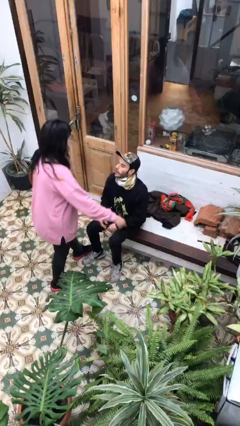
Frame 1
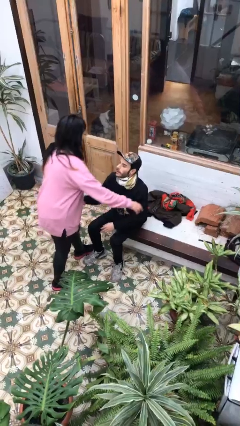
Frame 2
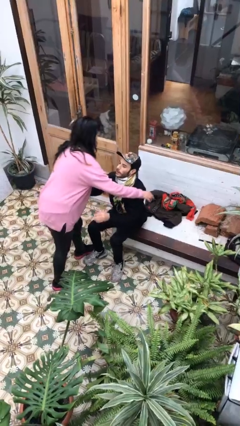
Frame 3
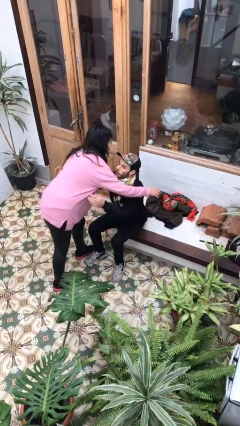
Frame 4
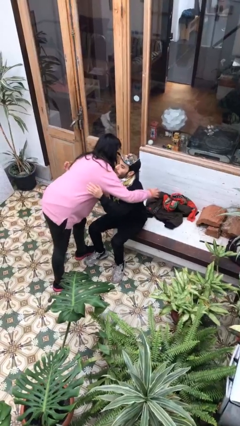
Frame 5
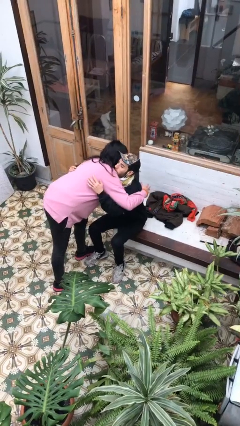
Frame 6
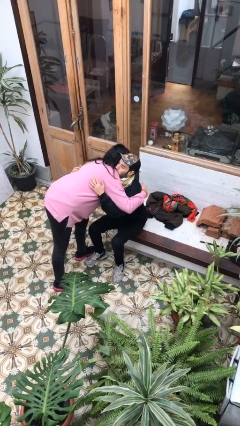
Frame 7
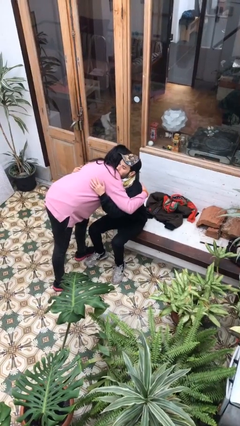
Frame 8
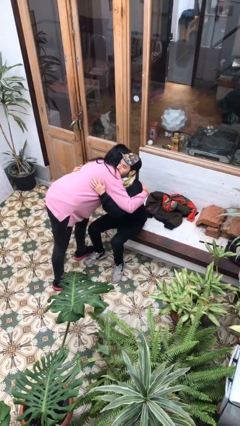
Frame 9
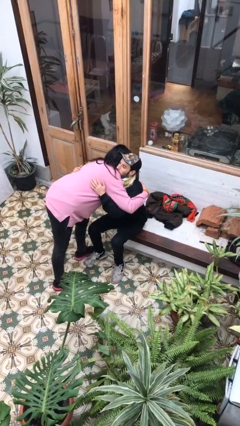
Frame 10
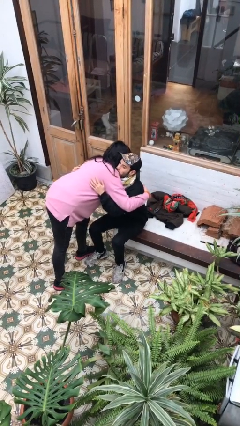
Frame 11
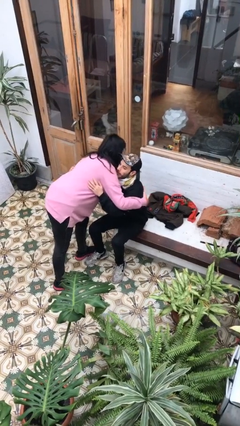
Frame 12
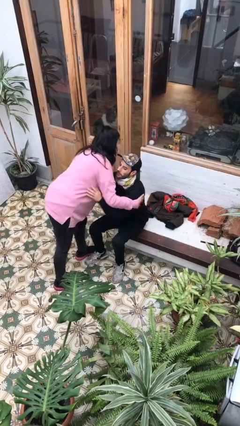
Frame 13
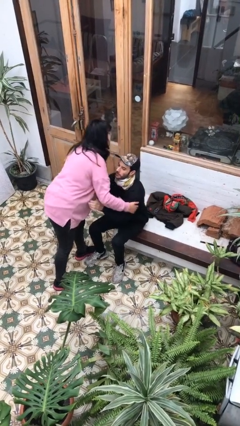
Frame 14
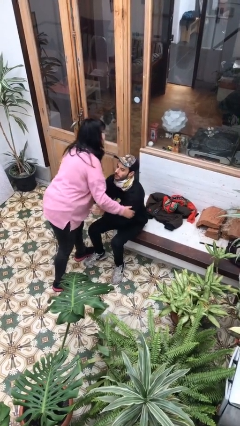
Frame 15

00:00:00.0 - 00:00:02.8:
person embraces person

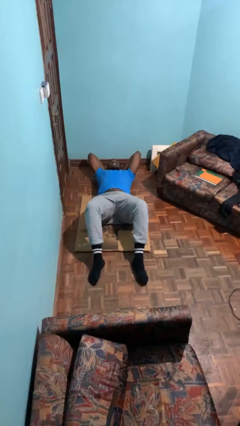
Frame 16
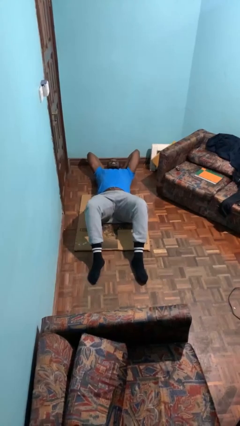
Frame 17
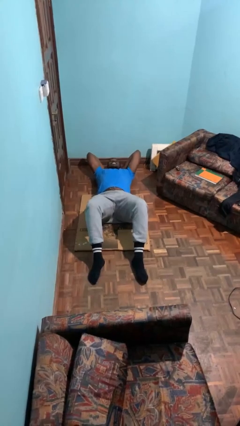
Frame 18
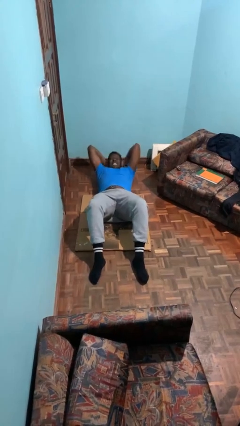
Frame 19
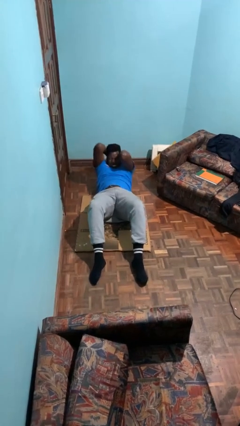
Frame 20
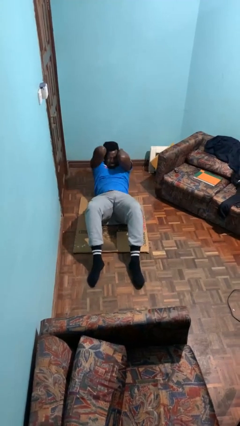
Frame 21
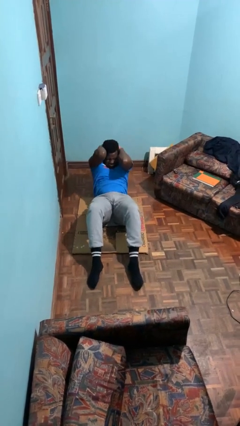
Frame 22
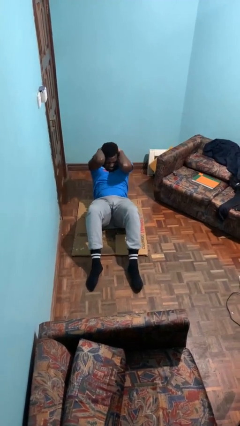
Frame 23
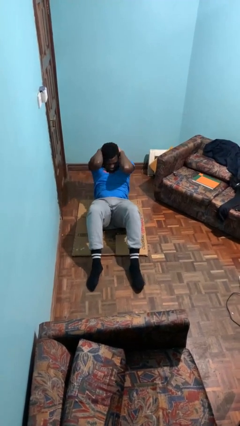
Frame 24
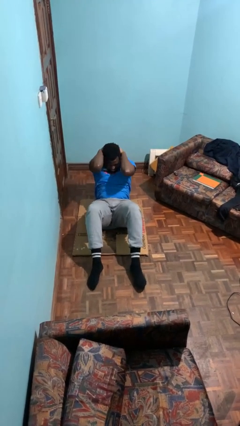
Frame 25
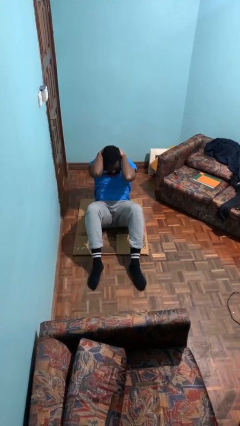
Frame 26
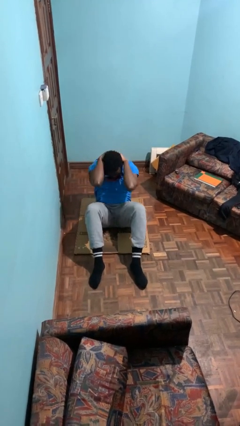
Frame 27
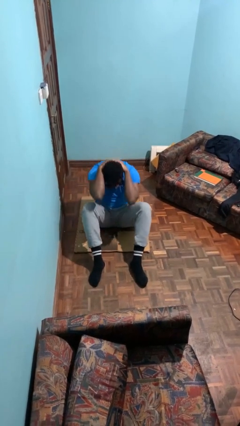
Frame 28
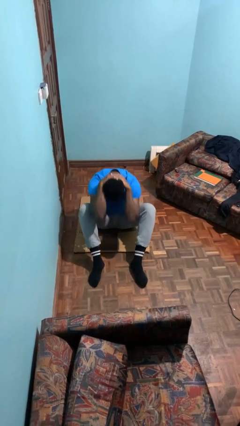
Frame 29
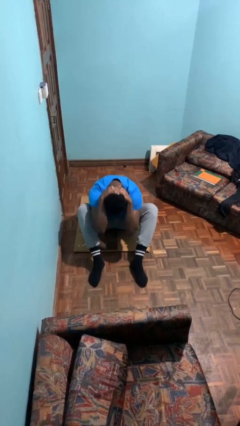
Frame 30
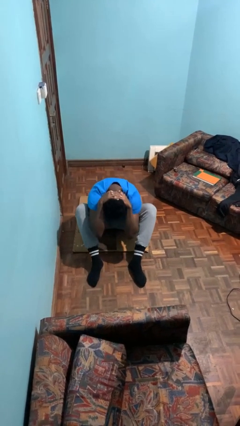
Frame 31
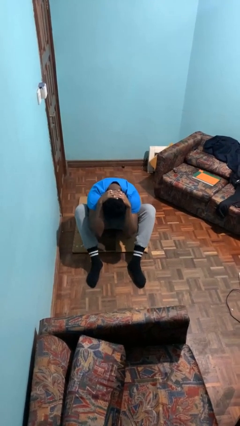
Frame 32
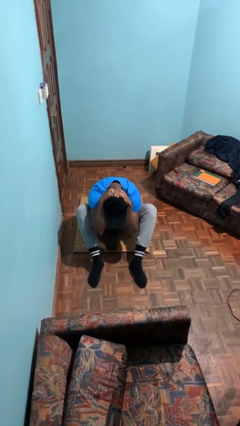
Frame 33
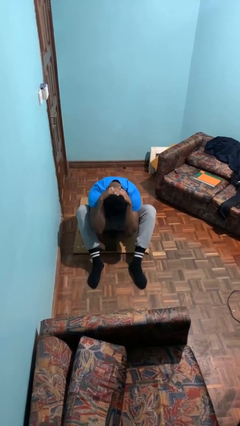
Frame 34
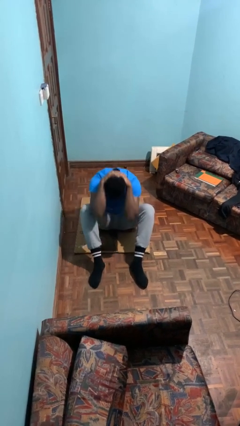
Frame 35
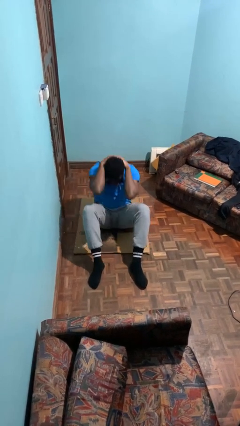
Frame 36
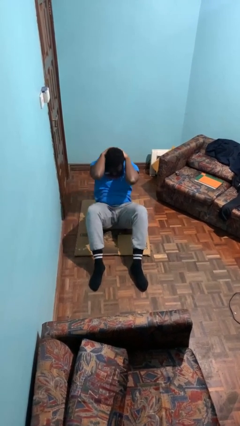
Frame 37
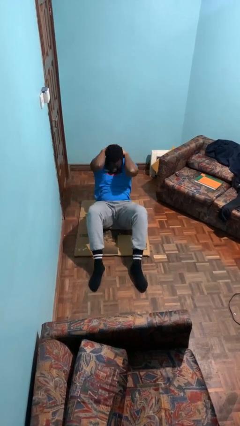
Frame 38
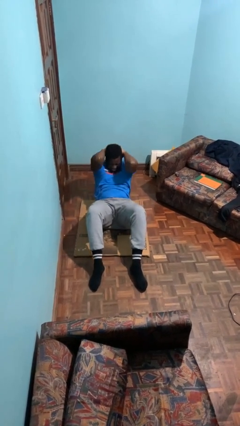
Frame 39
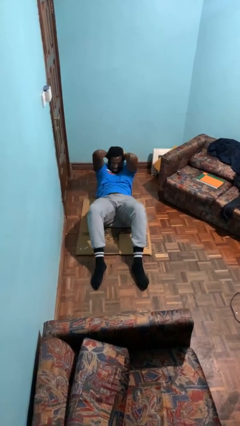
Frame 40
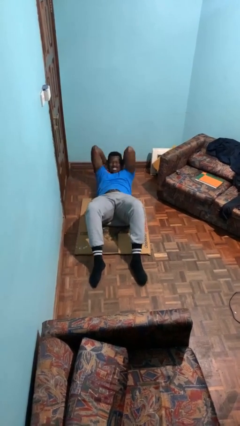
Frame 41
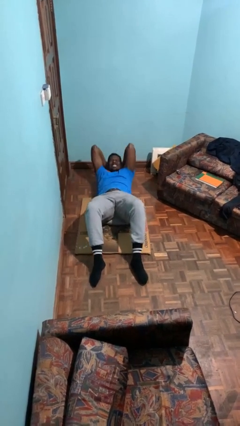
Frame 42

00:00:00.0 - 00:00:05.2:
person exercises with situp

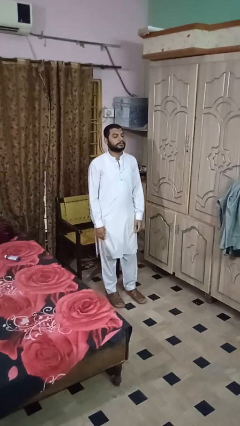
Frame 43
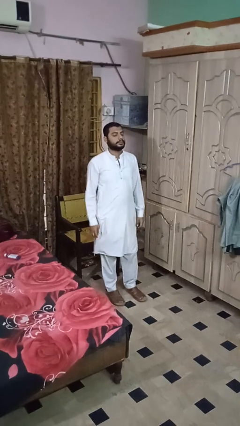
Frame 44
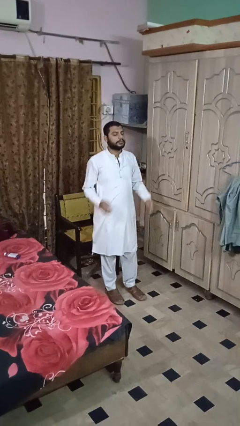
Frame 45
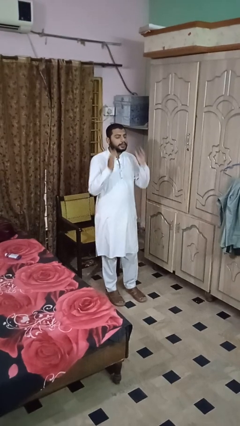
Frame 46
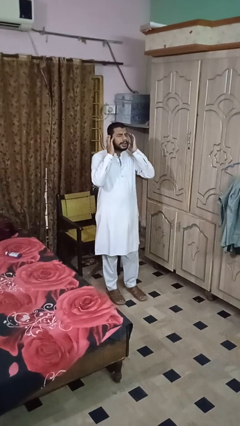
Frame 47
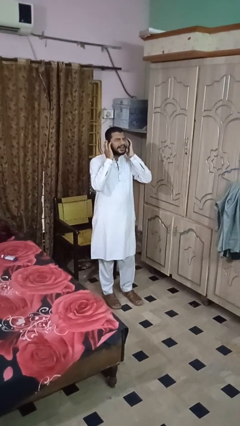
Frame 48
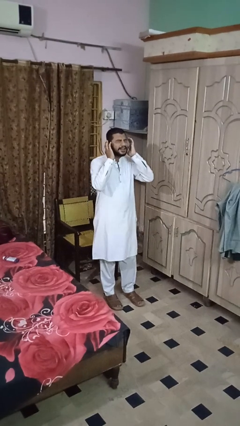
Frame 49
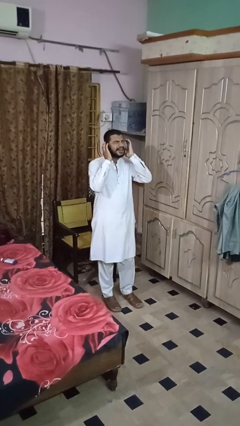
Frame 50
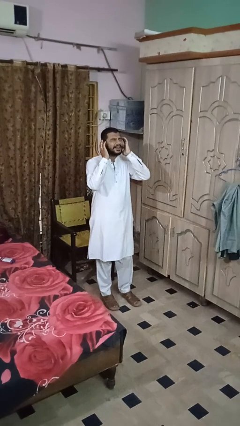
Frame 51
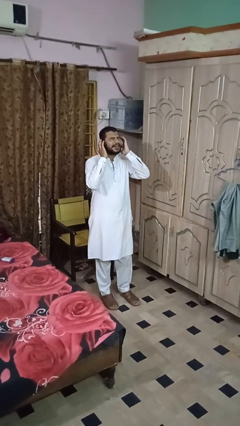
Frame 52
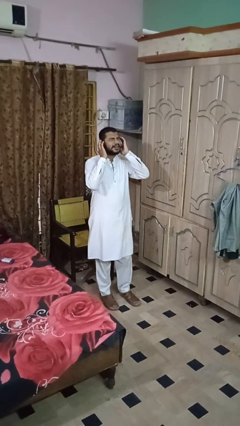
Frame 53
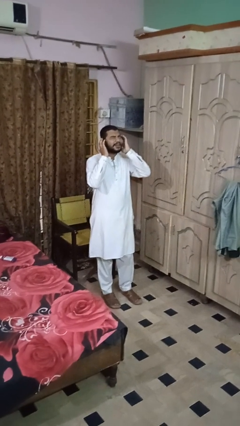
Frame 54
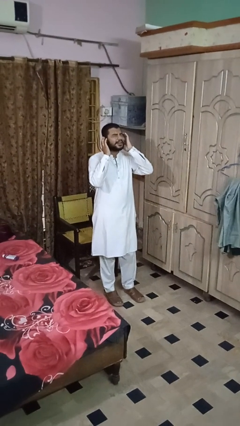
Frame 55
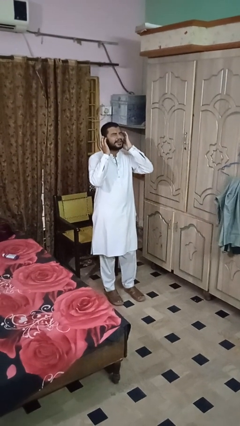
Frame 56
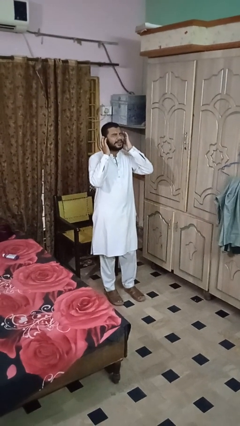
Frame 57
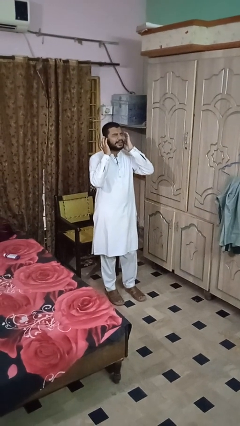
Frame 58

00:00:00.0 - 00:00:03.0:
person puts fingers in ear

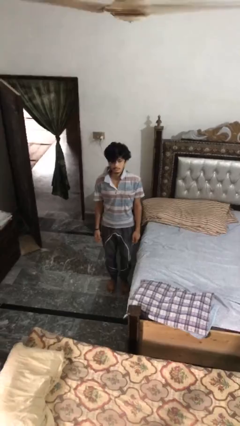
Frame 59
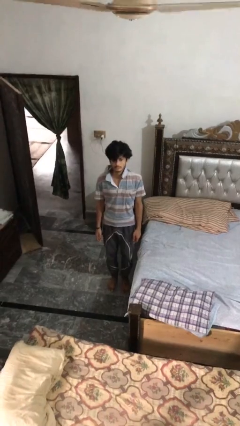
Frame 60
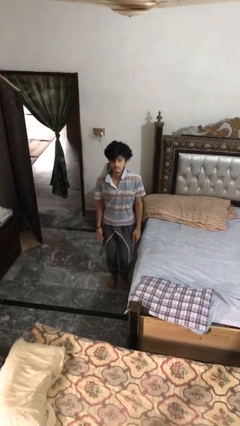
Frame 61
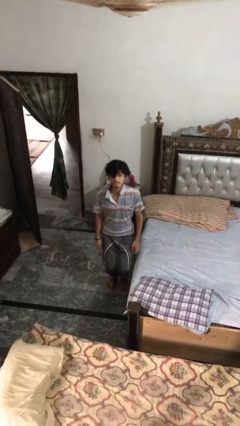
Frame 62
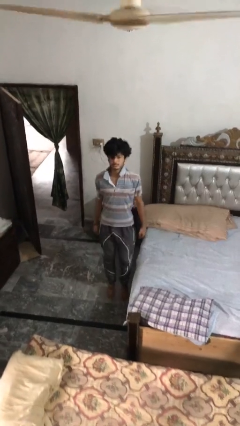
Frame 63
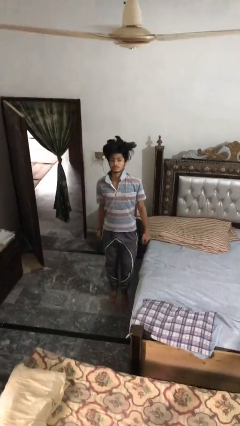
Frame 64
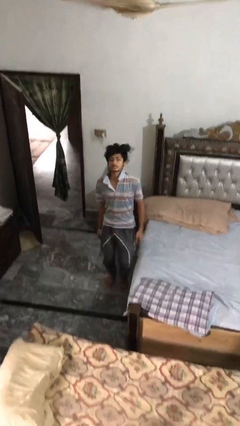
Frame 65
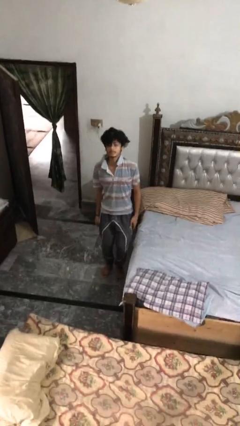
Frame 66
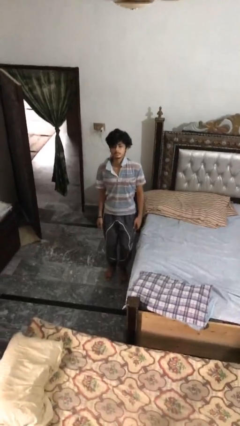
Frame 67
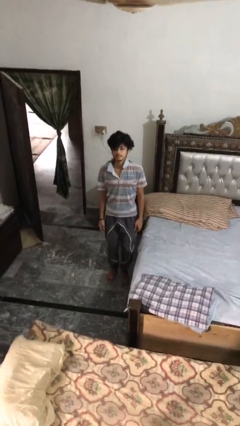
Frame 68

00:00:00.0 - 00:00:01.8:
person jumps

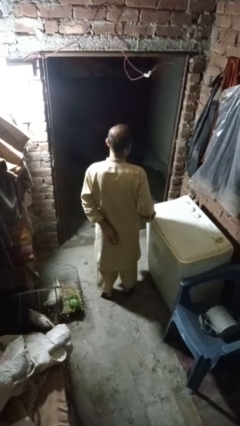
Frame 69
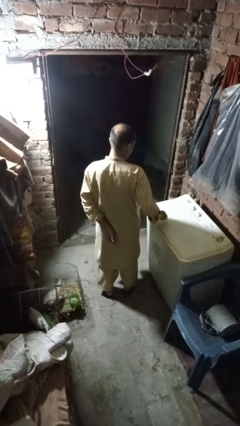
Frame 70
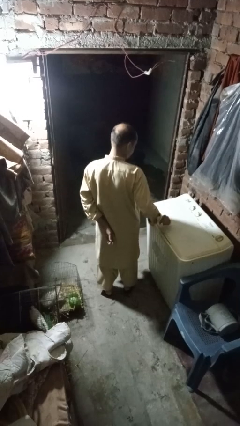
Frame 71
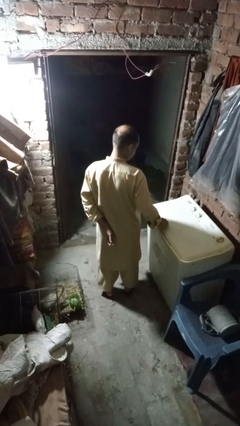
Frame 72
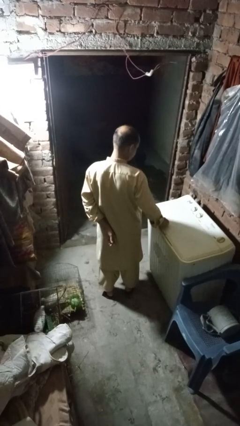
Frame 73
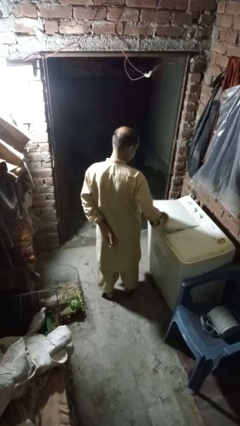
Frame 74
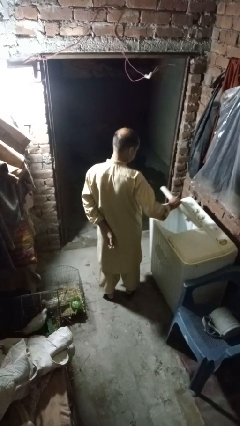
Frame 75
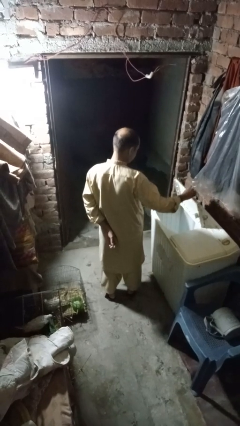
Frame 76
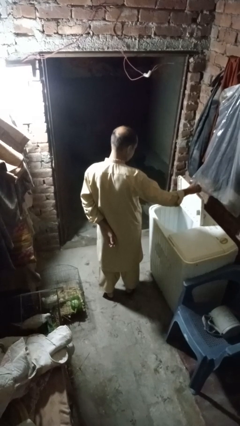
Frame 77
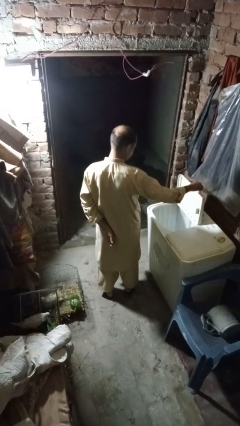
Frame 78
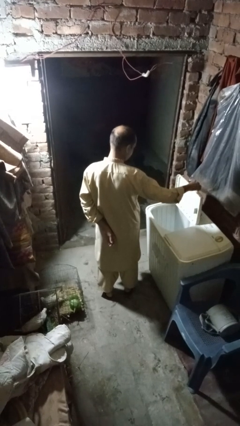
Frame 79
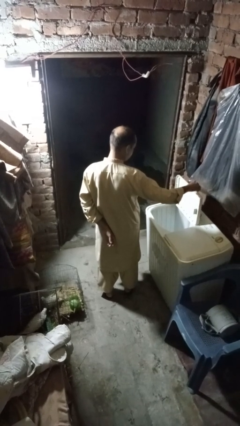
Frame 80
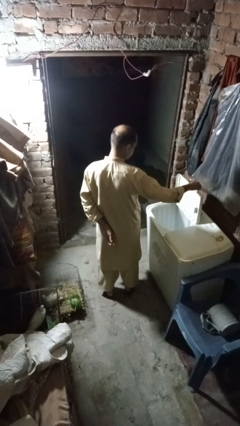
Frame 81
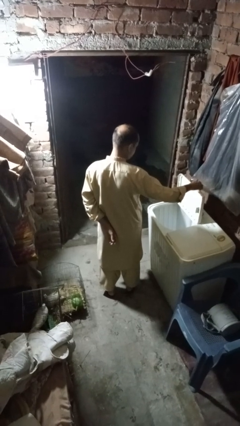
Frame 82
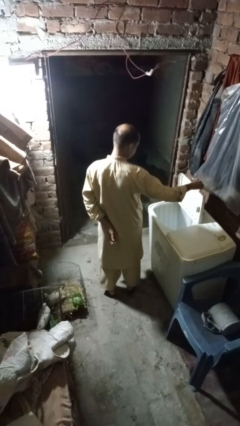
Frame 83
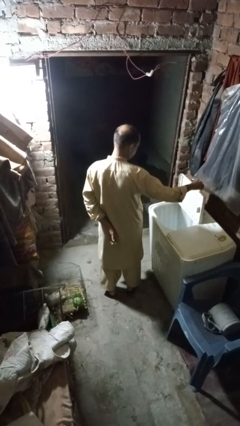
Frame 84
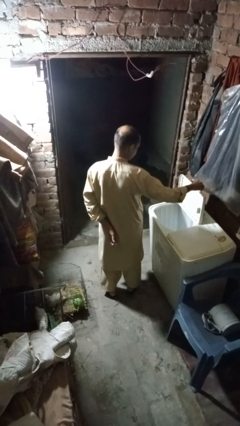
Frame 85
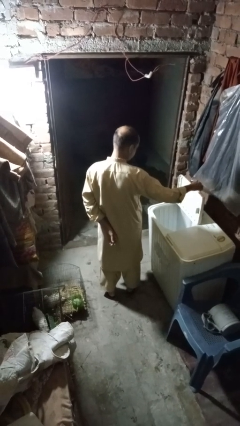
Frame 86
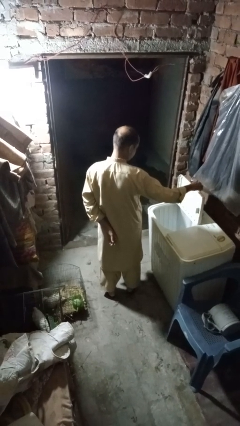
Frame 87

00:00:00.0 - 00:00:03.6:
person opens clothes washer

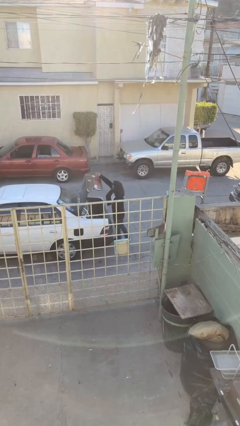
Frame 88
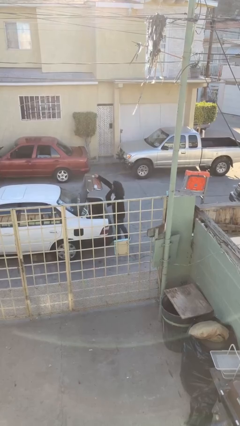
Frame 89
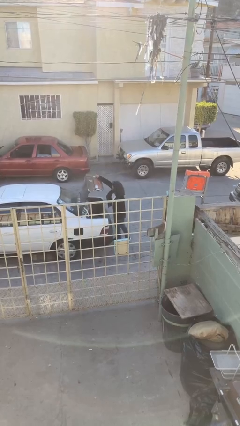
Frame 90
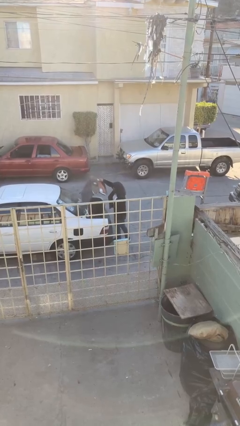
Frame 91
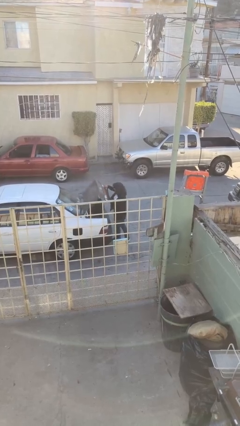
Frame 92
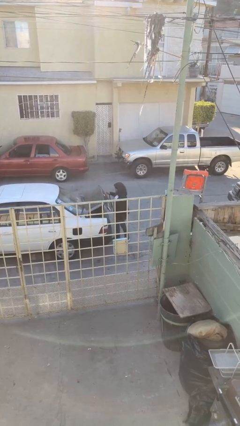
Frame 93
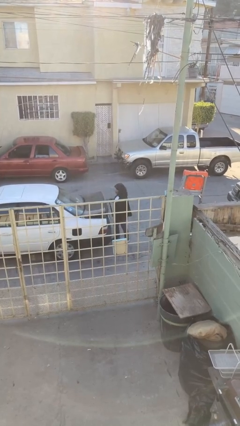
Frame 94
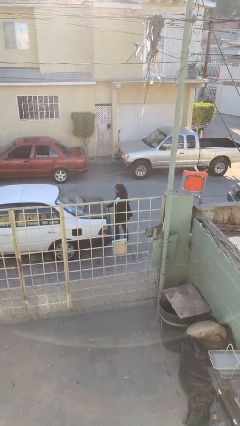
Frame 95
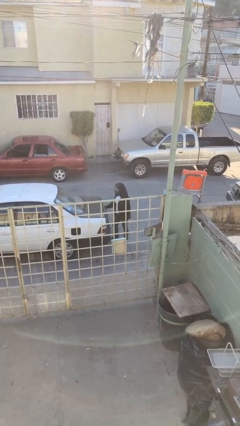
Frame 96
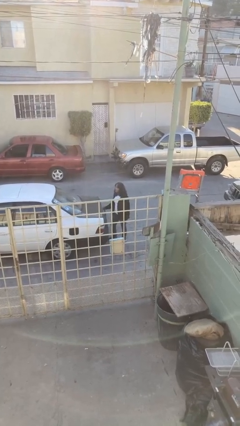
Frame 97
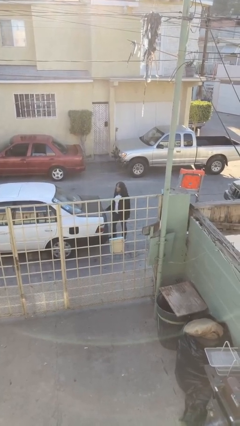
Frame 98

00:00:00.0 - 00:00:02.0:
person closes car trunk
